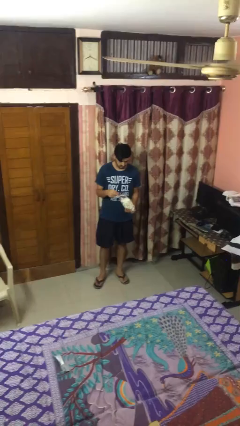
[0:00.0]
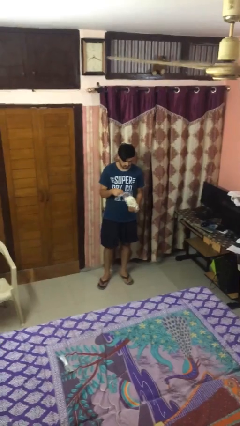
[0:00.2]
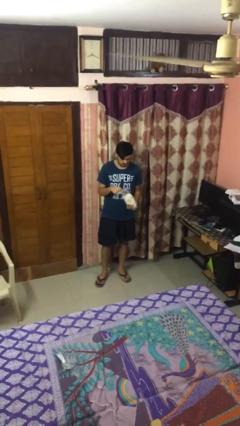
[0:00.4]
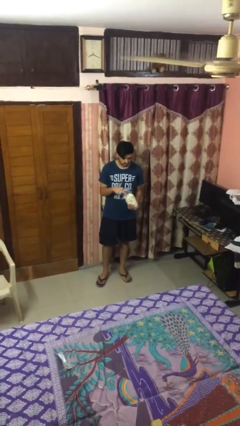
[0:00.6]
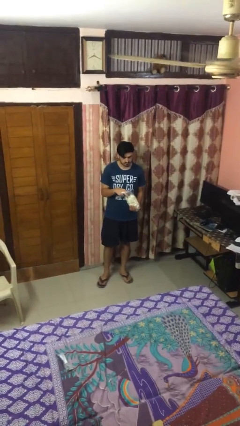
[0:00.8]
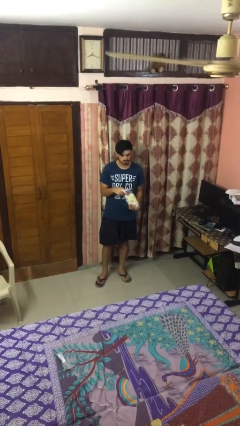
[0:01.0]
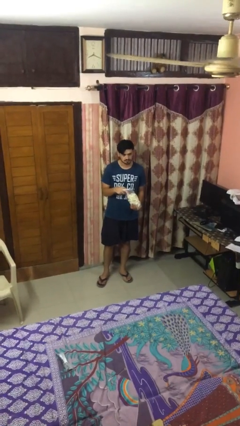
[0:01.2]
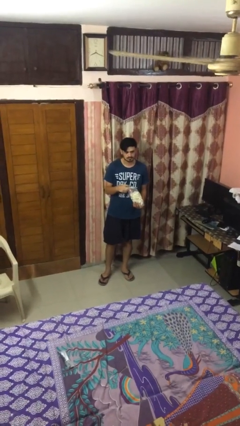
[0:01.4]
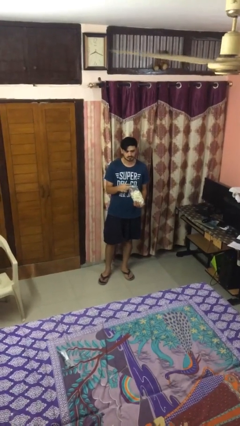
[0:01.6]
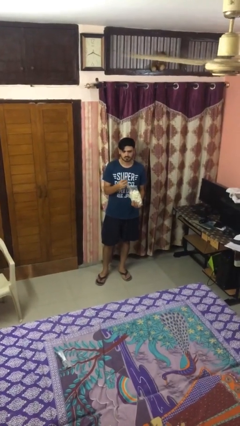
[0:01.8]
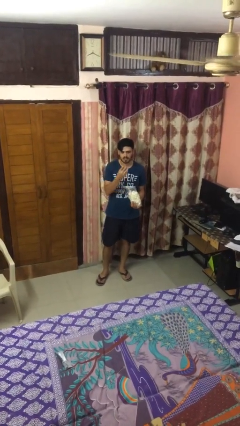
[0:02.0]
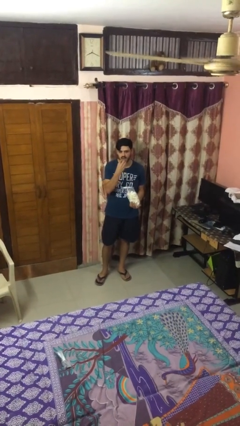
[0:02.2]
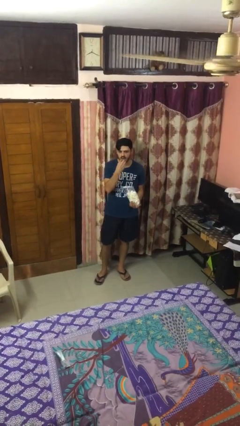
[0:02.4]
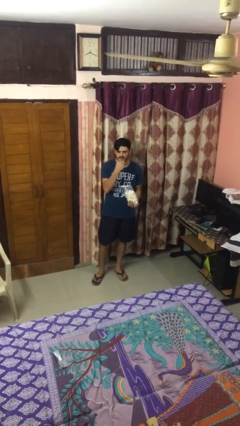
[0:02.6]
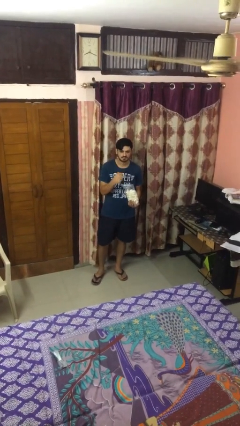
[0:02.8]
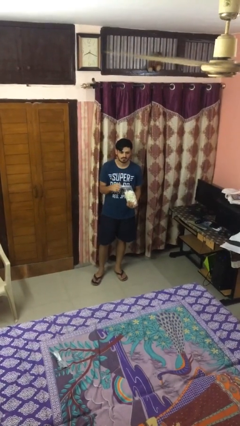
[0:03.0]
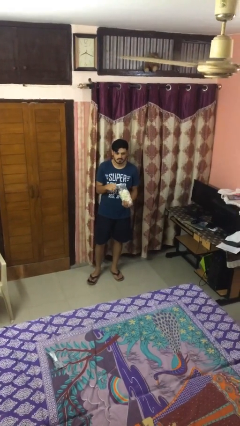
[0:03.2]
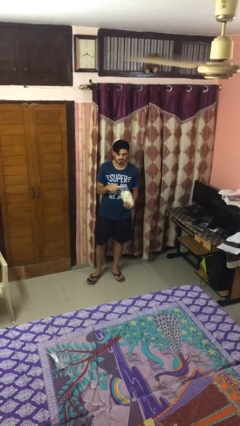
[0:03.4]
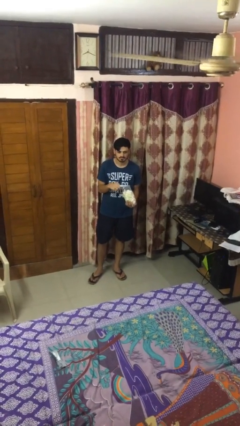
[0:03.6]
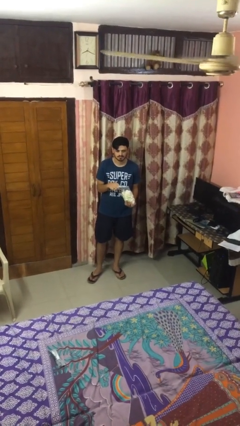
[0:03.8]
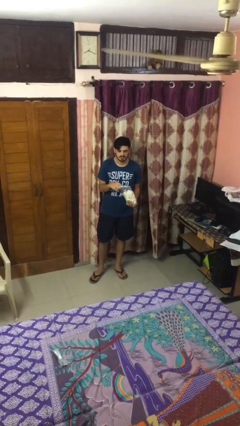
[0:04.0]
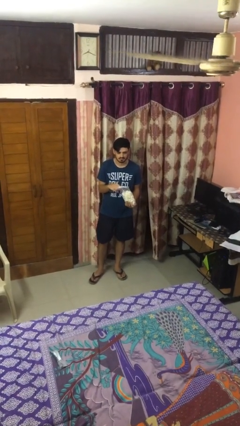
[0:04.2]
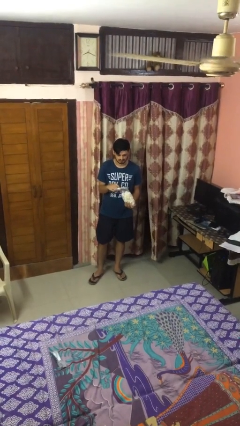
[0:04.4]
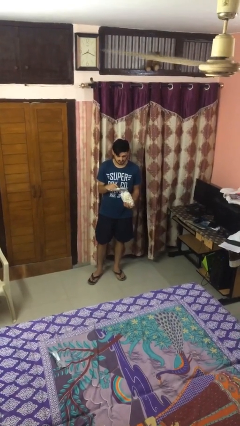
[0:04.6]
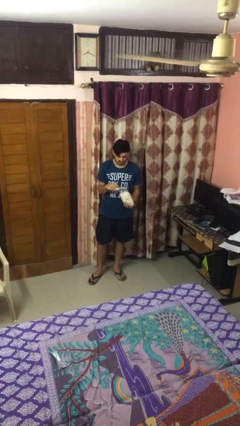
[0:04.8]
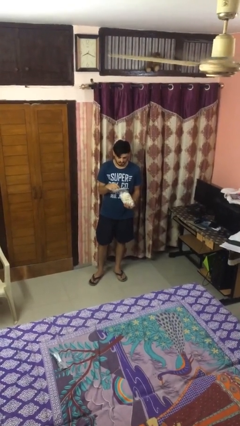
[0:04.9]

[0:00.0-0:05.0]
person eats snack from bag

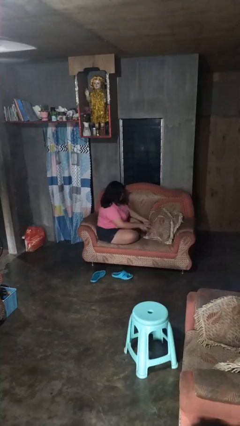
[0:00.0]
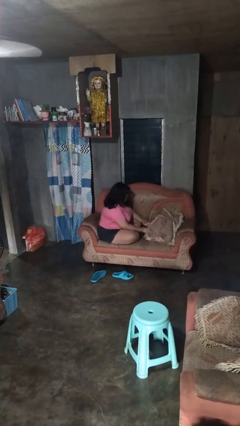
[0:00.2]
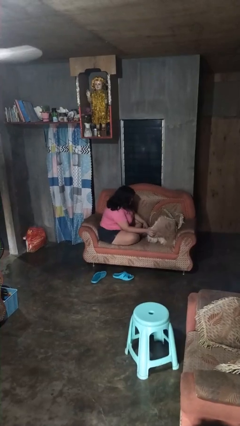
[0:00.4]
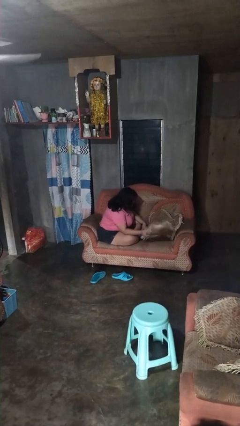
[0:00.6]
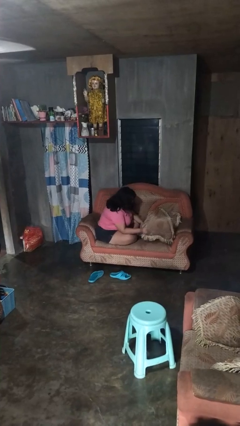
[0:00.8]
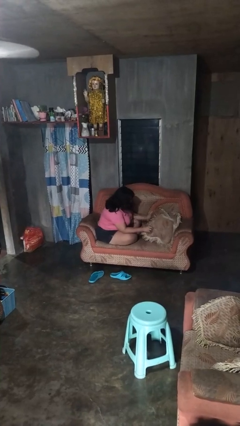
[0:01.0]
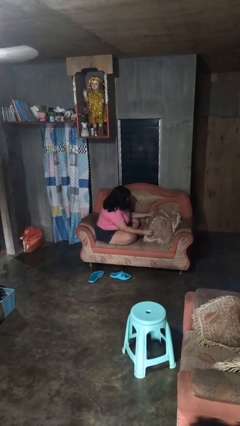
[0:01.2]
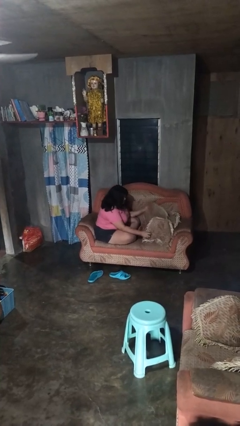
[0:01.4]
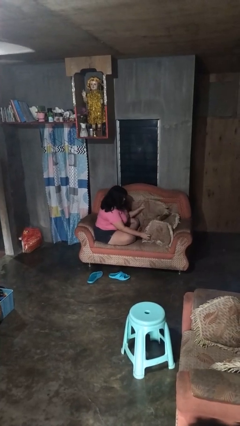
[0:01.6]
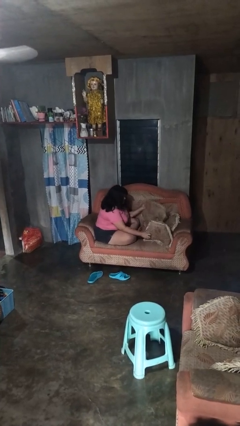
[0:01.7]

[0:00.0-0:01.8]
person searches in couch

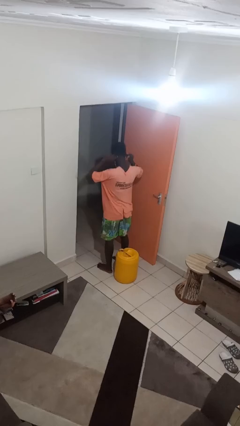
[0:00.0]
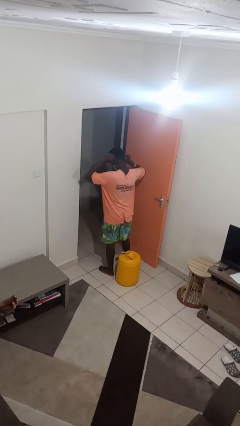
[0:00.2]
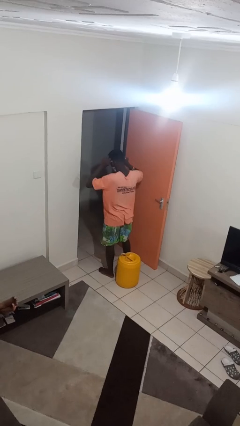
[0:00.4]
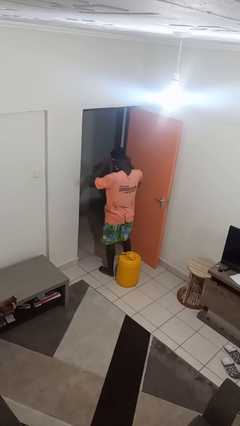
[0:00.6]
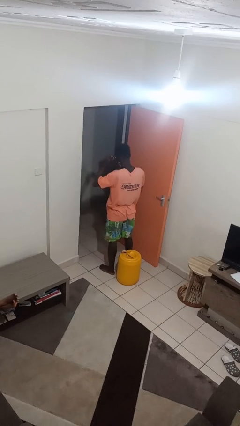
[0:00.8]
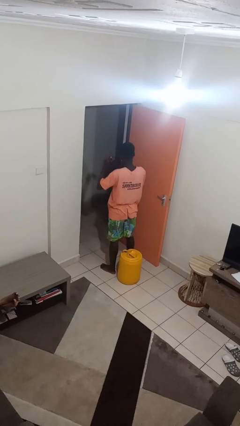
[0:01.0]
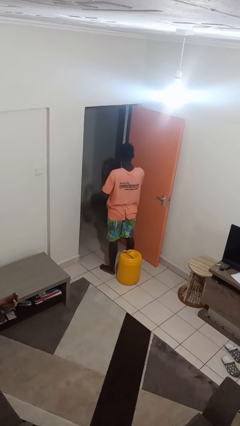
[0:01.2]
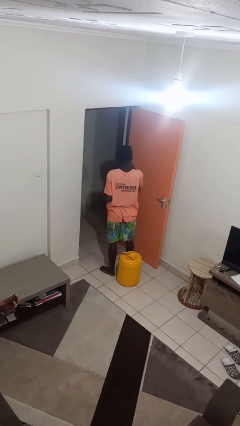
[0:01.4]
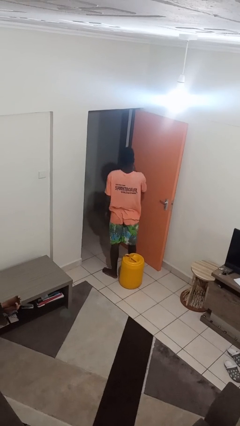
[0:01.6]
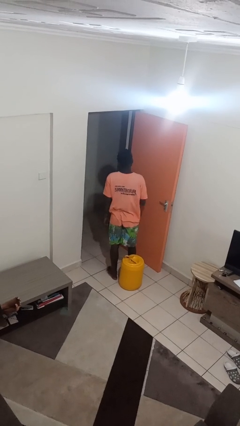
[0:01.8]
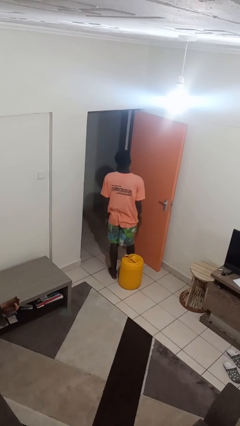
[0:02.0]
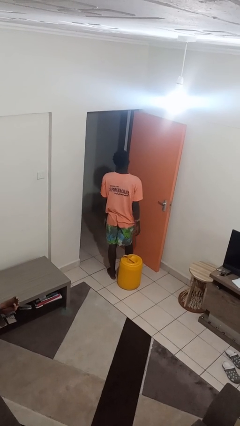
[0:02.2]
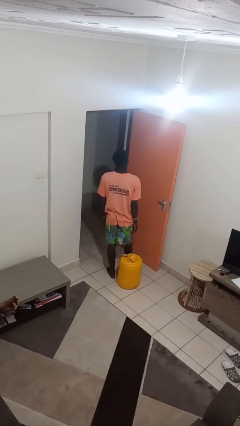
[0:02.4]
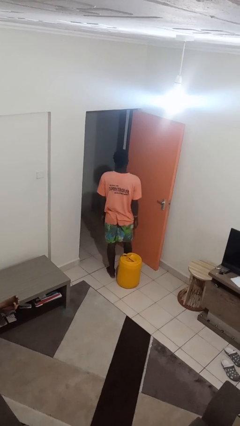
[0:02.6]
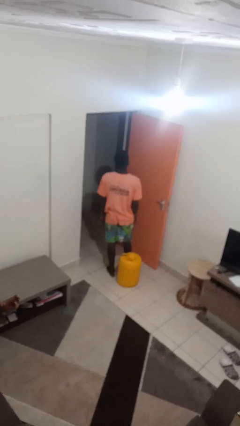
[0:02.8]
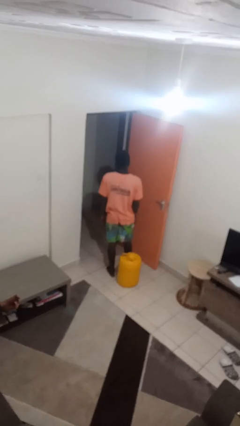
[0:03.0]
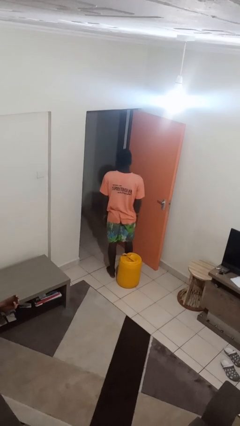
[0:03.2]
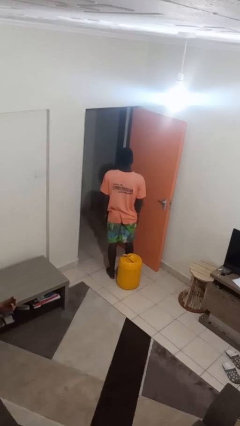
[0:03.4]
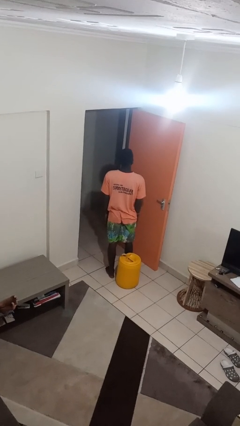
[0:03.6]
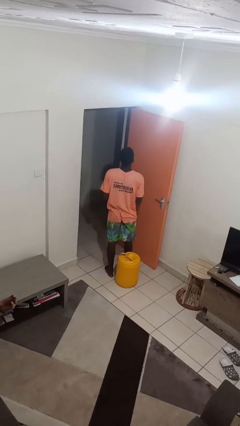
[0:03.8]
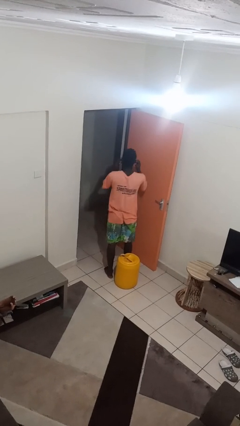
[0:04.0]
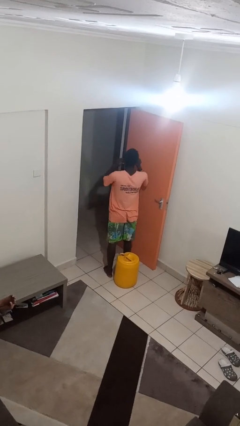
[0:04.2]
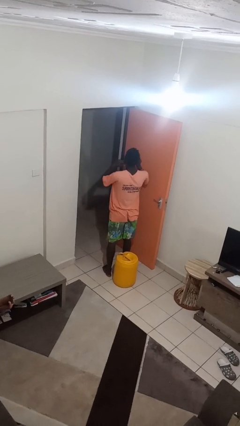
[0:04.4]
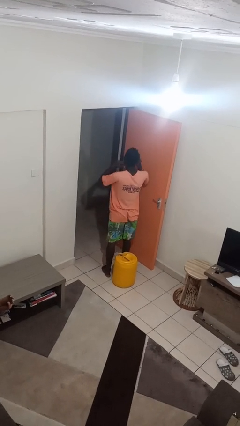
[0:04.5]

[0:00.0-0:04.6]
person puts on facemask

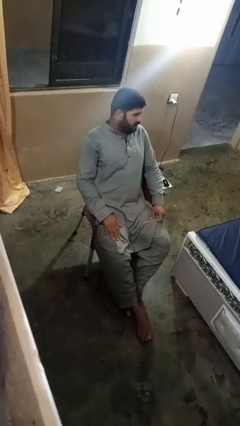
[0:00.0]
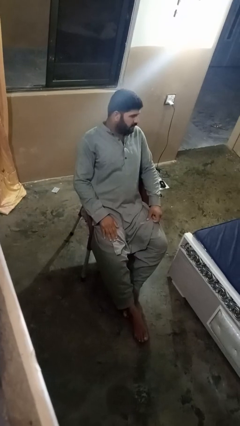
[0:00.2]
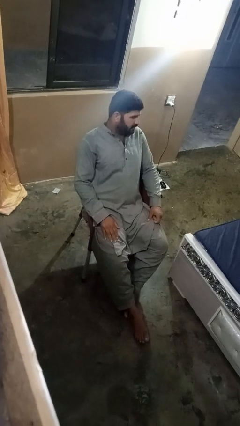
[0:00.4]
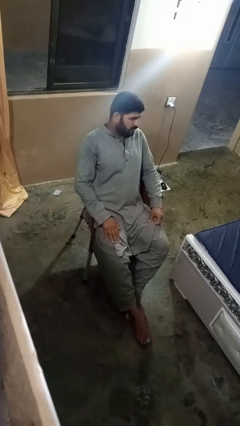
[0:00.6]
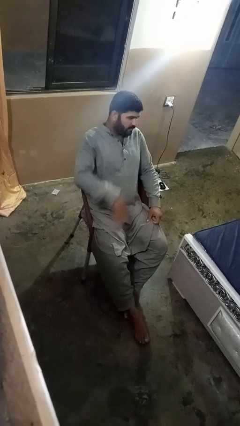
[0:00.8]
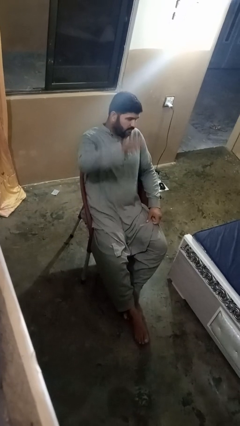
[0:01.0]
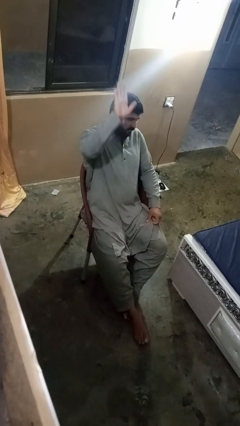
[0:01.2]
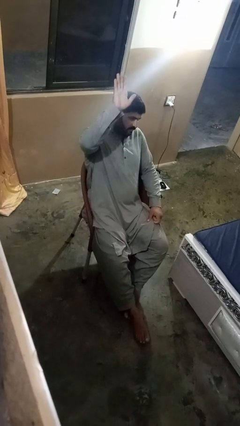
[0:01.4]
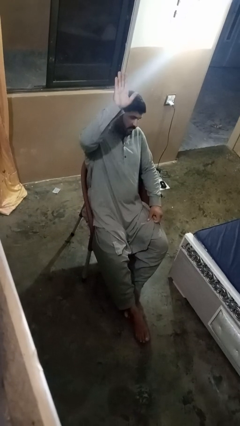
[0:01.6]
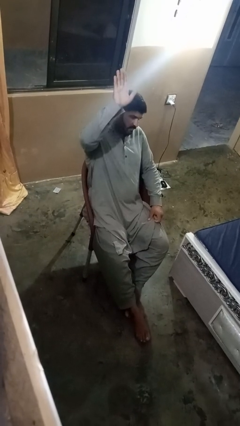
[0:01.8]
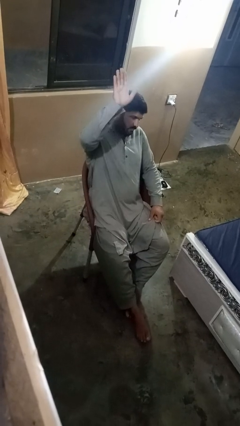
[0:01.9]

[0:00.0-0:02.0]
person gestures number five

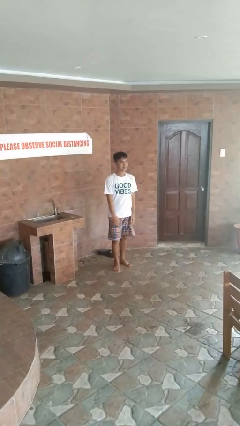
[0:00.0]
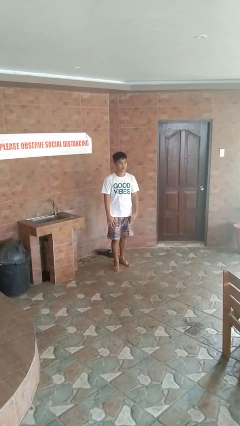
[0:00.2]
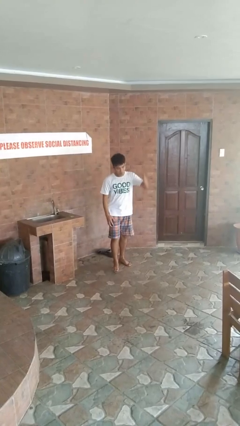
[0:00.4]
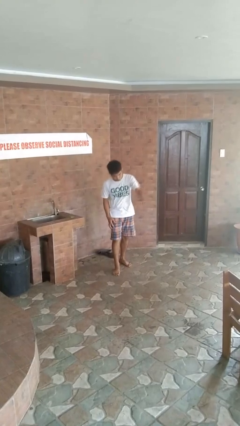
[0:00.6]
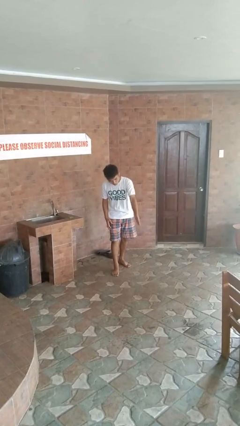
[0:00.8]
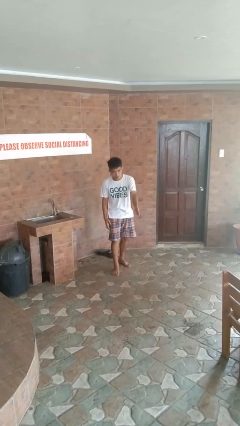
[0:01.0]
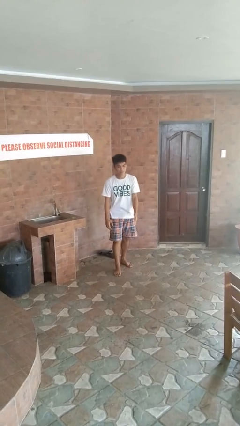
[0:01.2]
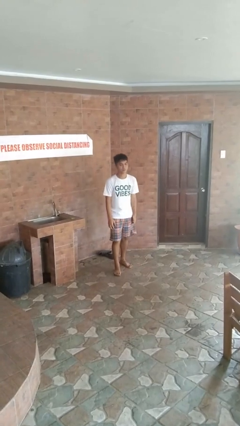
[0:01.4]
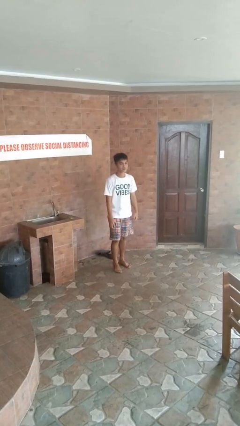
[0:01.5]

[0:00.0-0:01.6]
person karate chop

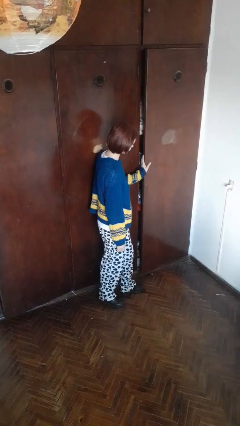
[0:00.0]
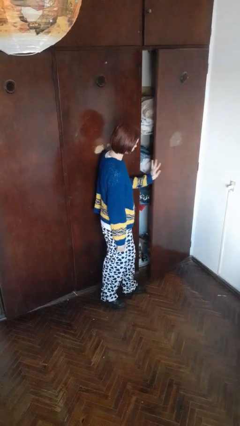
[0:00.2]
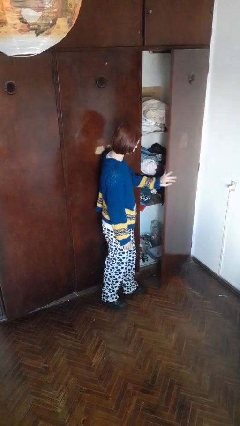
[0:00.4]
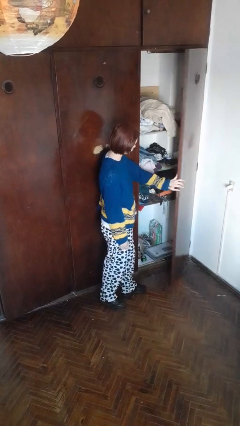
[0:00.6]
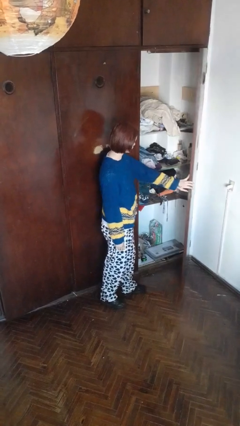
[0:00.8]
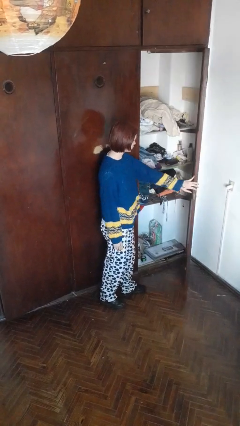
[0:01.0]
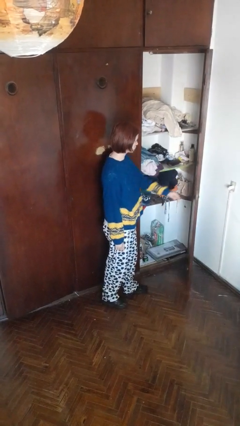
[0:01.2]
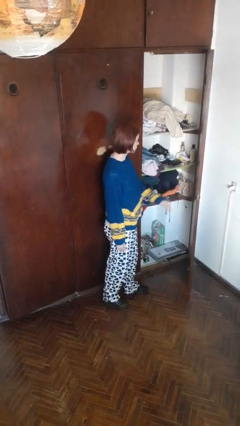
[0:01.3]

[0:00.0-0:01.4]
person opens closet door

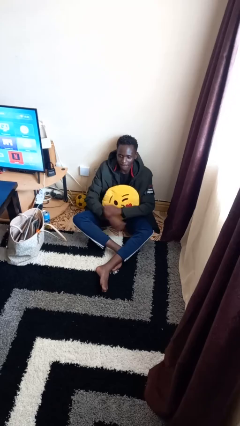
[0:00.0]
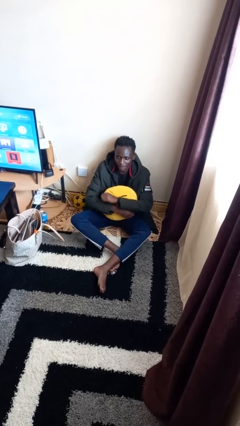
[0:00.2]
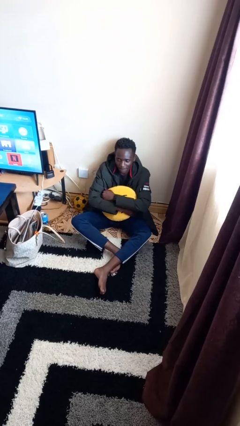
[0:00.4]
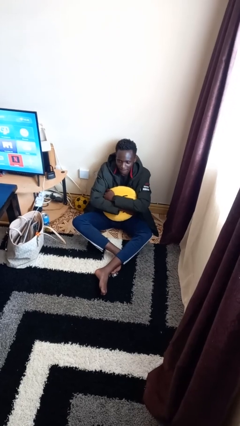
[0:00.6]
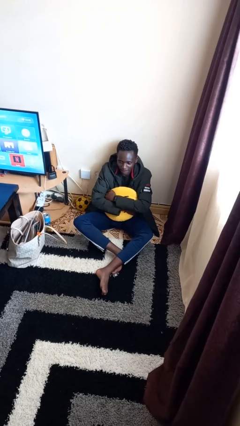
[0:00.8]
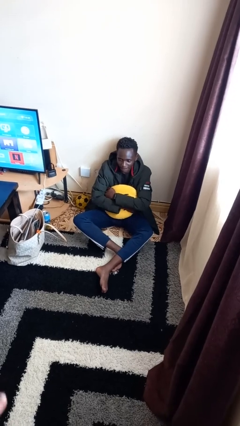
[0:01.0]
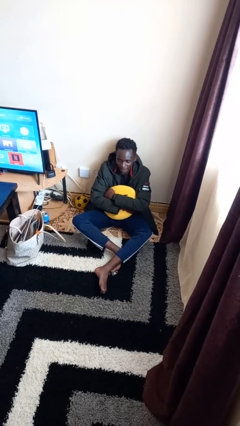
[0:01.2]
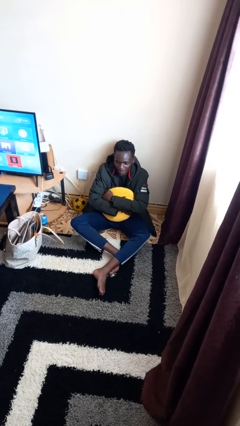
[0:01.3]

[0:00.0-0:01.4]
person hugs stuffed animal
